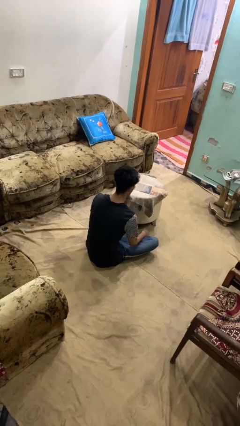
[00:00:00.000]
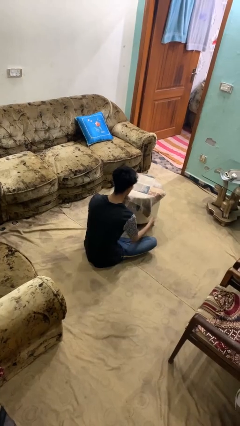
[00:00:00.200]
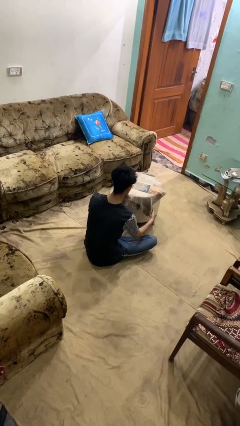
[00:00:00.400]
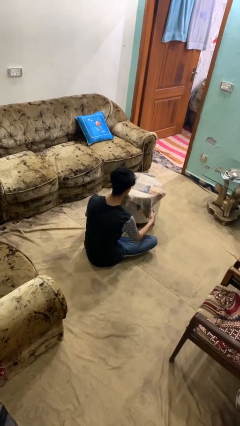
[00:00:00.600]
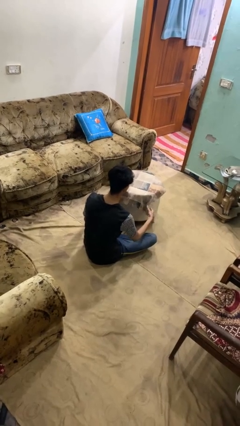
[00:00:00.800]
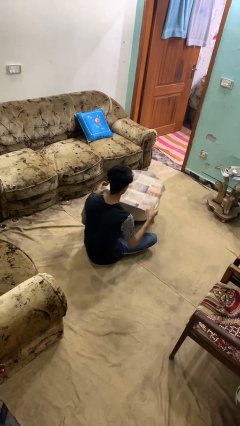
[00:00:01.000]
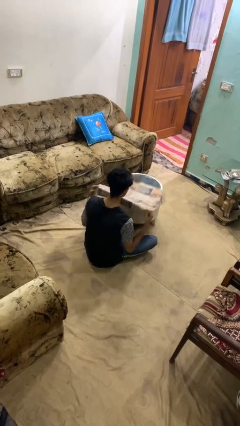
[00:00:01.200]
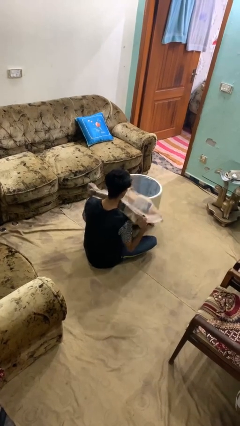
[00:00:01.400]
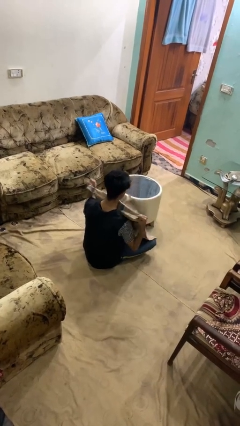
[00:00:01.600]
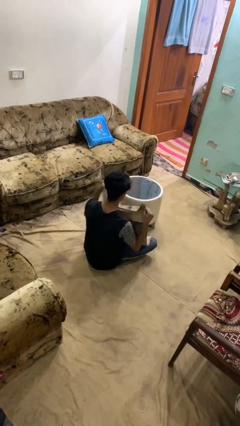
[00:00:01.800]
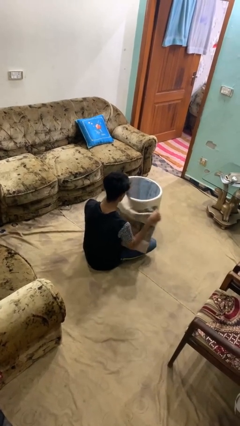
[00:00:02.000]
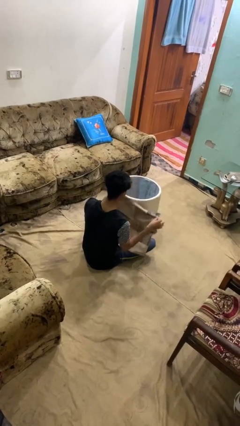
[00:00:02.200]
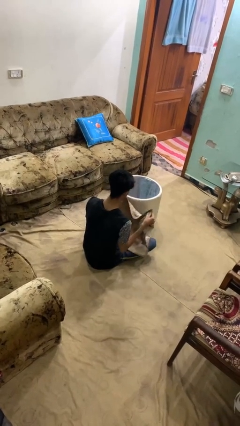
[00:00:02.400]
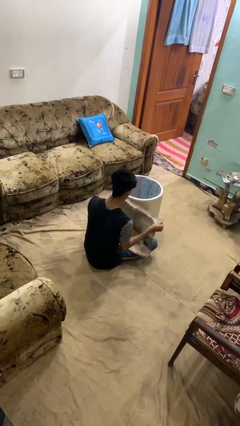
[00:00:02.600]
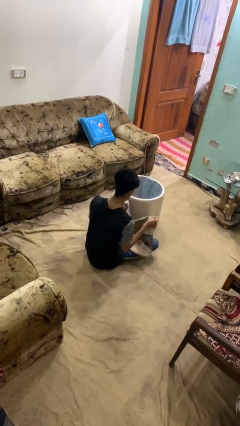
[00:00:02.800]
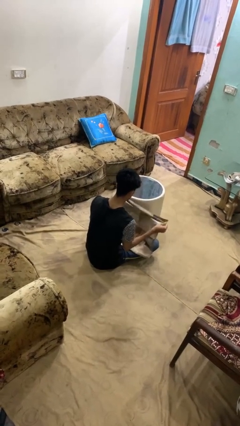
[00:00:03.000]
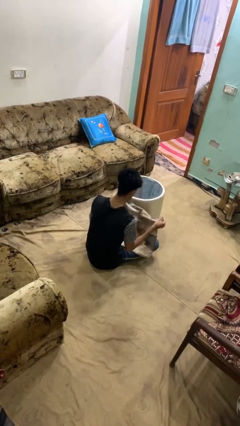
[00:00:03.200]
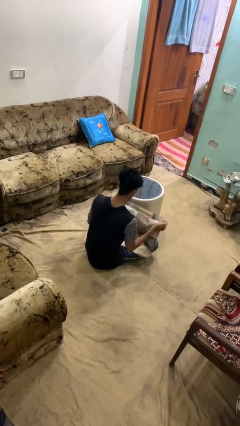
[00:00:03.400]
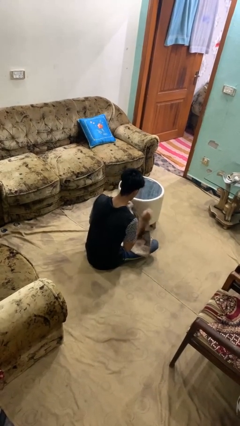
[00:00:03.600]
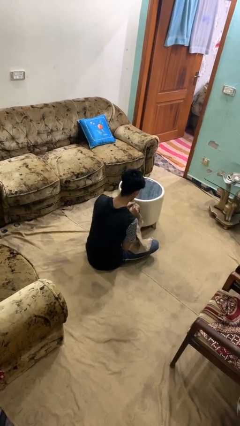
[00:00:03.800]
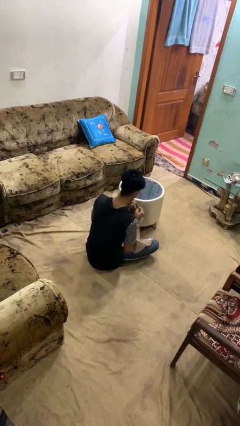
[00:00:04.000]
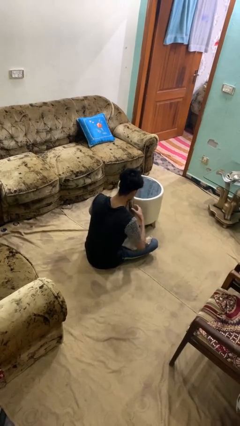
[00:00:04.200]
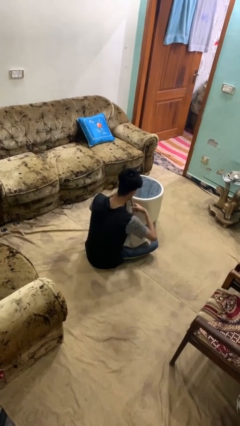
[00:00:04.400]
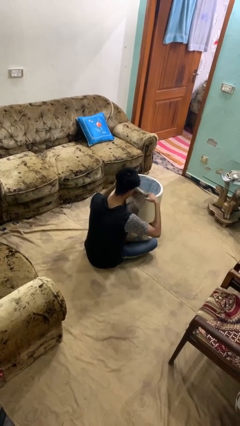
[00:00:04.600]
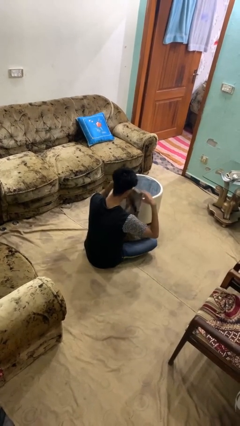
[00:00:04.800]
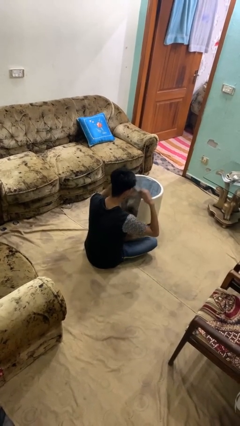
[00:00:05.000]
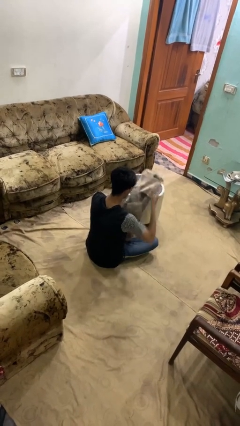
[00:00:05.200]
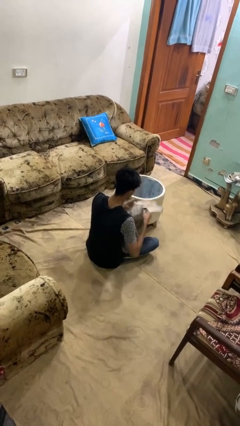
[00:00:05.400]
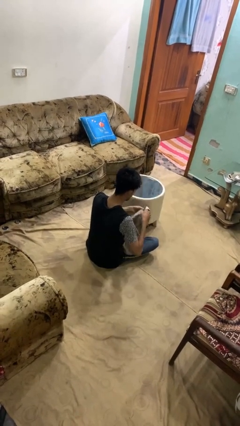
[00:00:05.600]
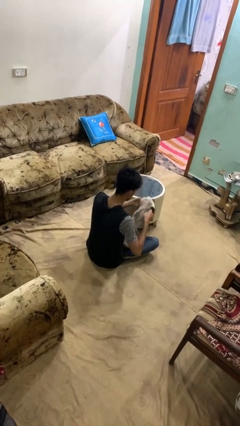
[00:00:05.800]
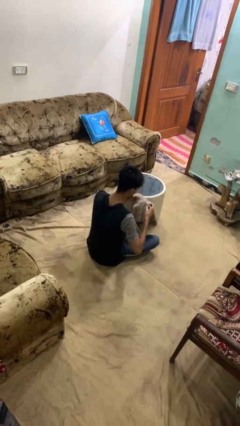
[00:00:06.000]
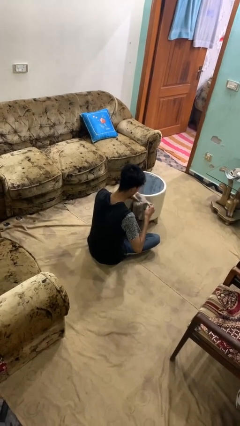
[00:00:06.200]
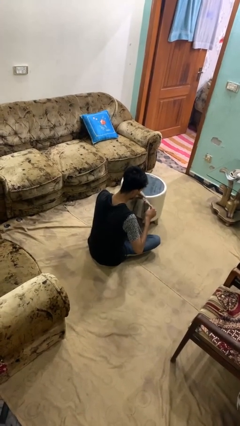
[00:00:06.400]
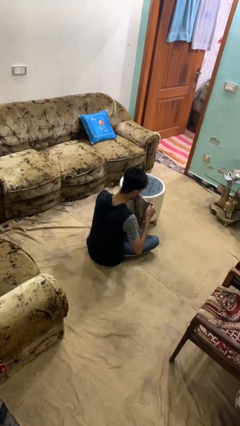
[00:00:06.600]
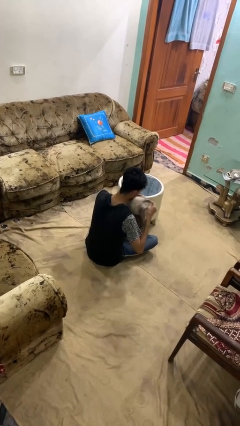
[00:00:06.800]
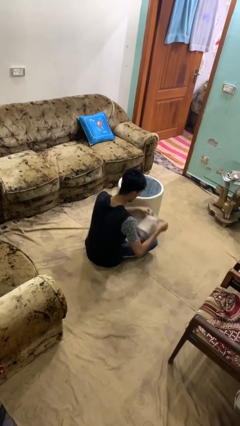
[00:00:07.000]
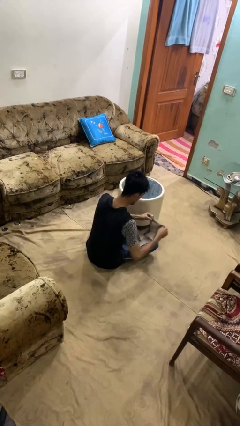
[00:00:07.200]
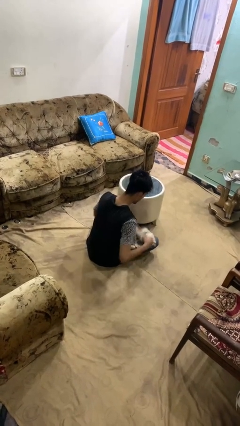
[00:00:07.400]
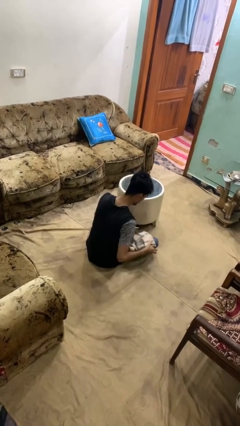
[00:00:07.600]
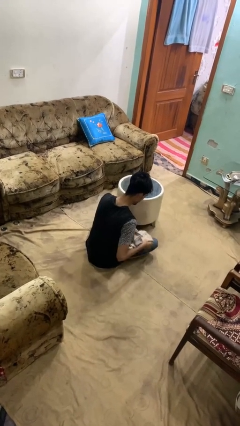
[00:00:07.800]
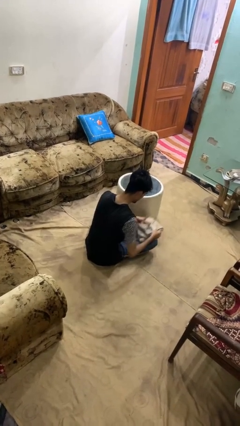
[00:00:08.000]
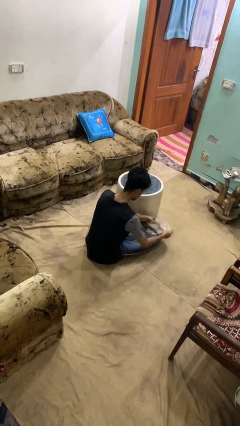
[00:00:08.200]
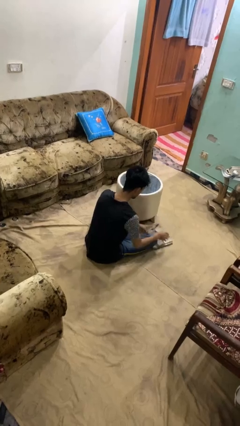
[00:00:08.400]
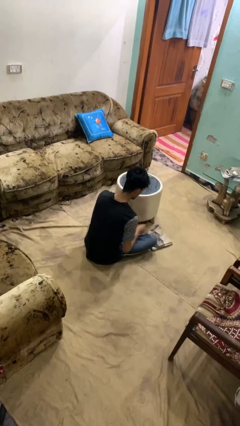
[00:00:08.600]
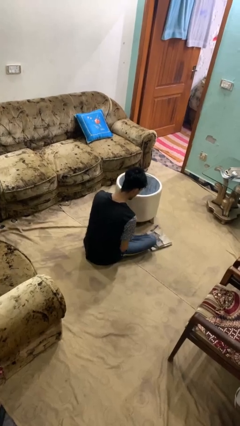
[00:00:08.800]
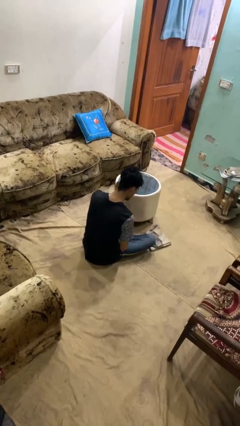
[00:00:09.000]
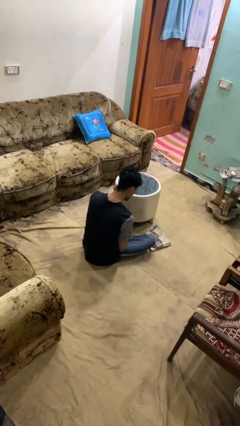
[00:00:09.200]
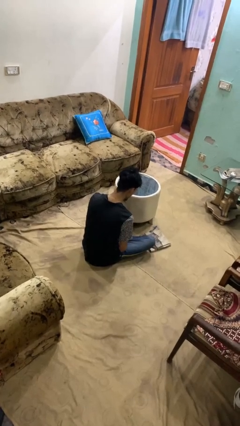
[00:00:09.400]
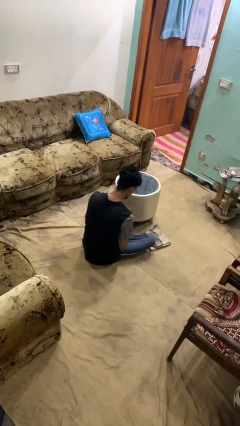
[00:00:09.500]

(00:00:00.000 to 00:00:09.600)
person folds tablecloth

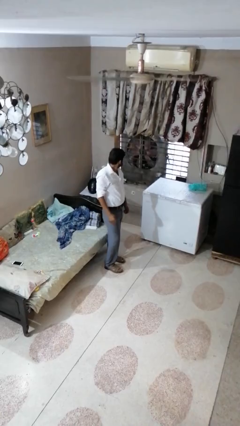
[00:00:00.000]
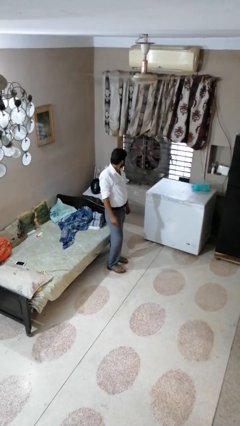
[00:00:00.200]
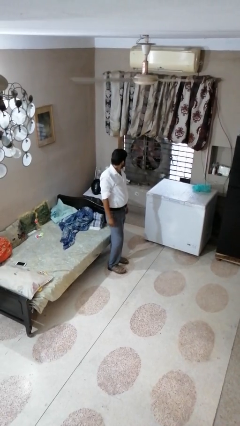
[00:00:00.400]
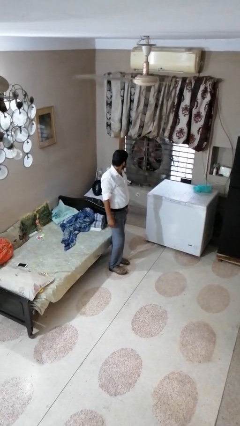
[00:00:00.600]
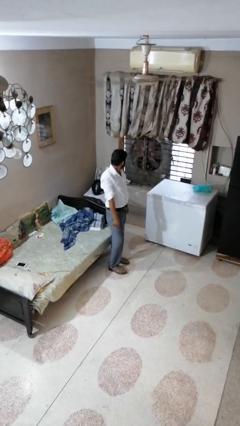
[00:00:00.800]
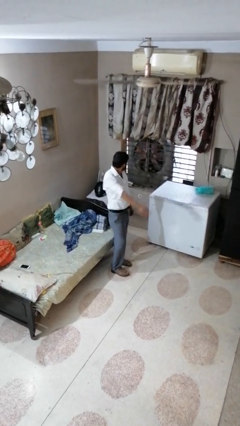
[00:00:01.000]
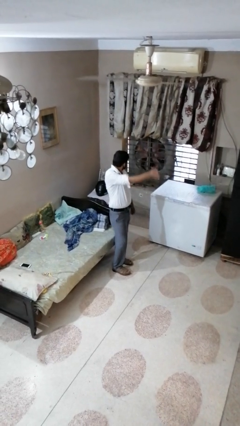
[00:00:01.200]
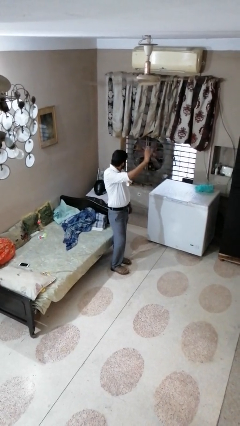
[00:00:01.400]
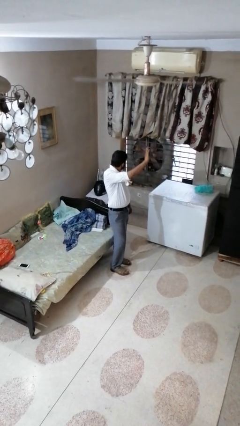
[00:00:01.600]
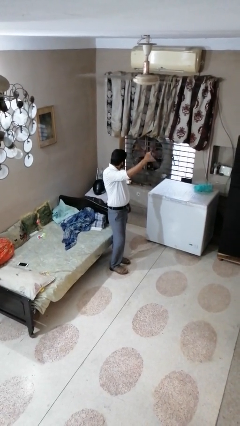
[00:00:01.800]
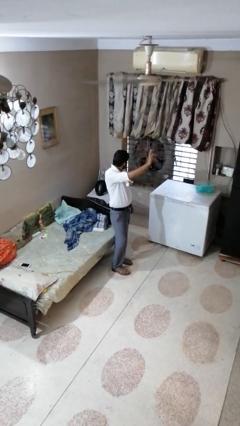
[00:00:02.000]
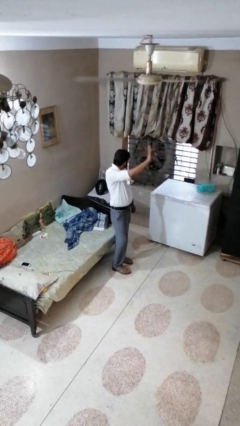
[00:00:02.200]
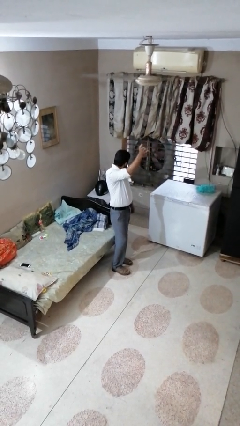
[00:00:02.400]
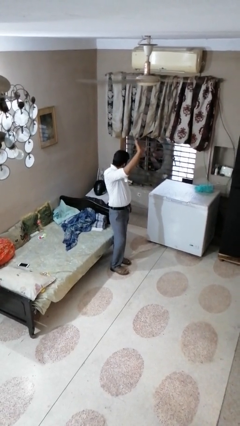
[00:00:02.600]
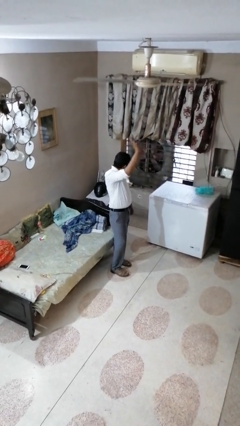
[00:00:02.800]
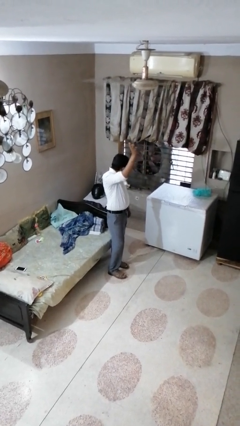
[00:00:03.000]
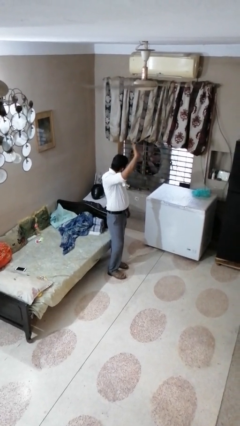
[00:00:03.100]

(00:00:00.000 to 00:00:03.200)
person waves at person

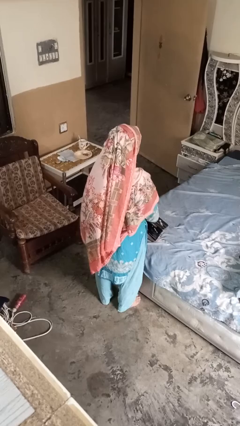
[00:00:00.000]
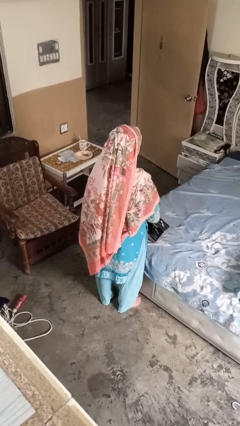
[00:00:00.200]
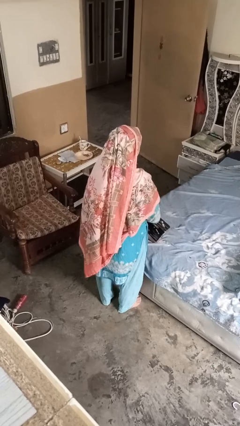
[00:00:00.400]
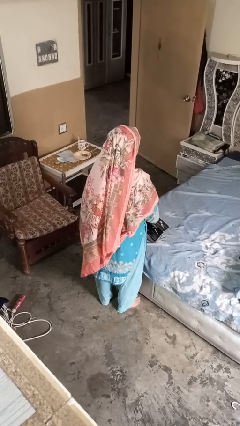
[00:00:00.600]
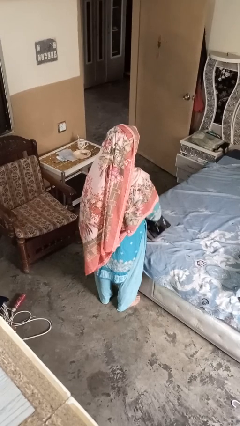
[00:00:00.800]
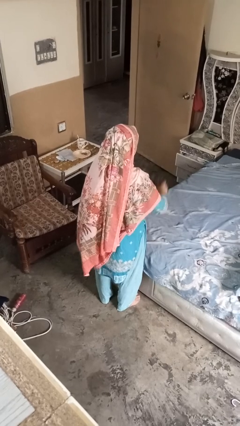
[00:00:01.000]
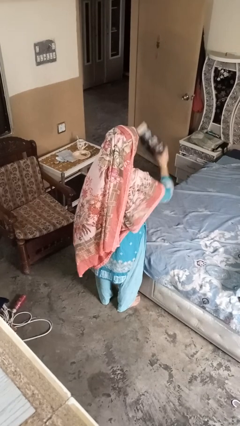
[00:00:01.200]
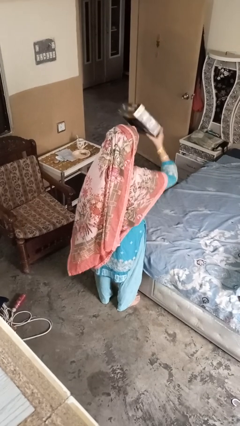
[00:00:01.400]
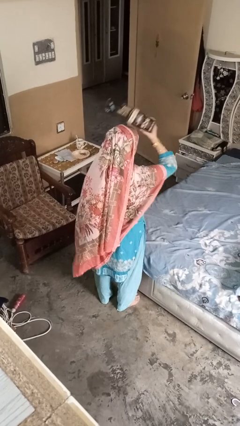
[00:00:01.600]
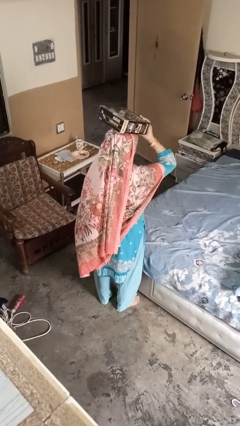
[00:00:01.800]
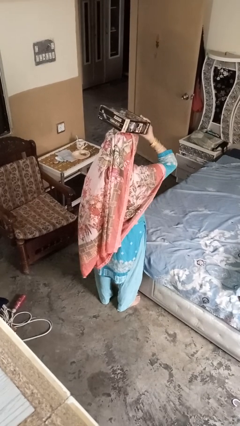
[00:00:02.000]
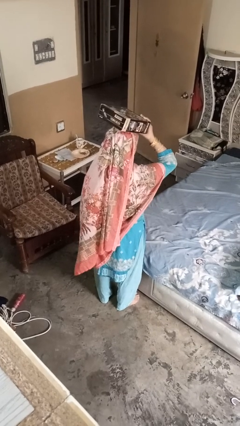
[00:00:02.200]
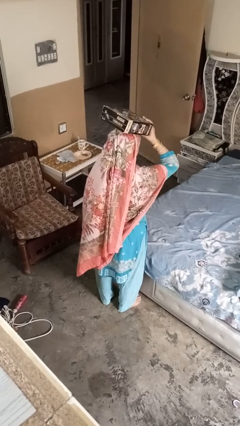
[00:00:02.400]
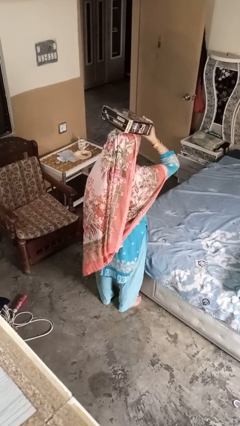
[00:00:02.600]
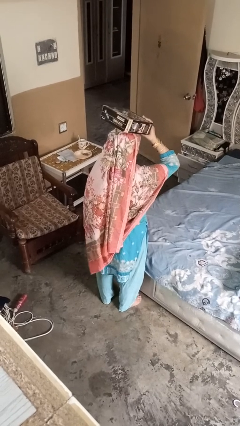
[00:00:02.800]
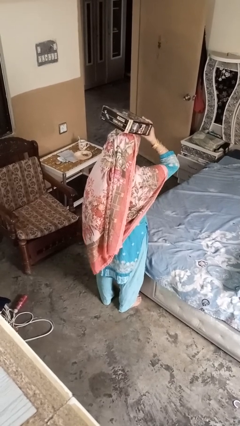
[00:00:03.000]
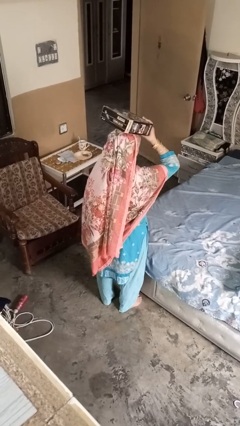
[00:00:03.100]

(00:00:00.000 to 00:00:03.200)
person holds object above head

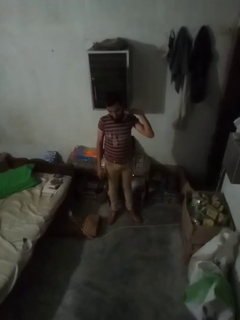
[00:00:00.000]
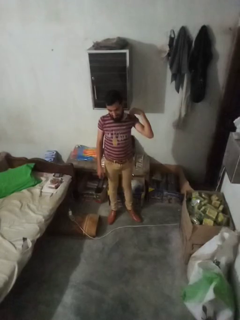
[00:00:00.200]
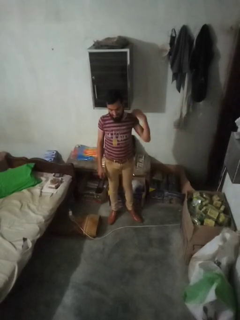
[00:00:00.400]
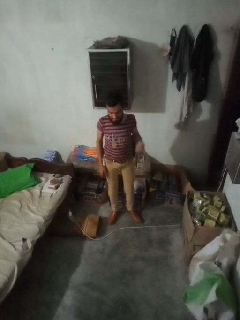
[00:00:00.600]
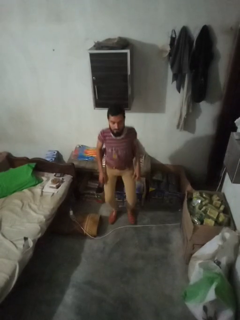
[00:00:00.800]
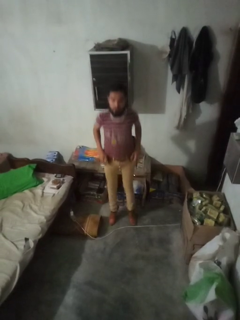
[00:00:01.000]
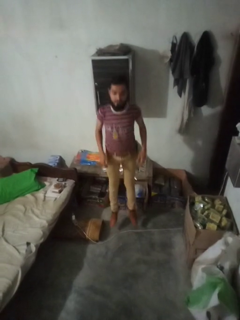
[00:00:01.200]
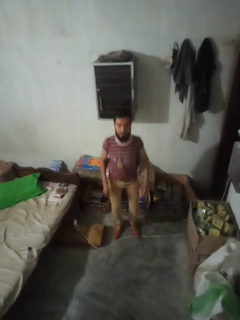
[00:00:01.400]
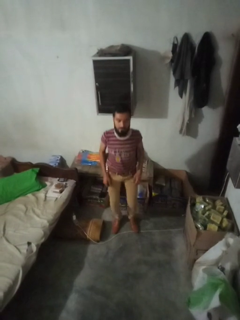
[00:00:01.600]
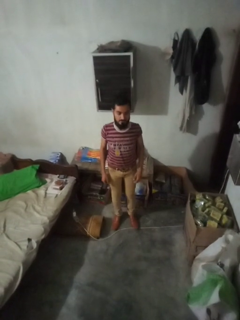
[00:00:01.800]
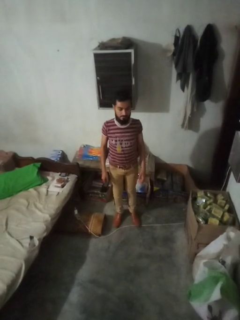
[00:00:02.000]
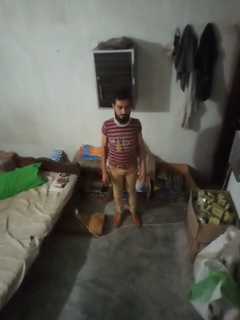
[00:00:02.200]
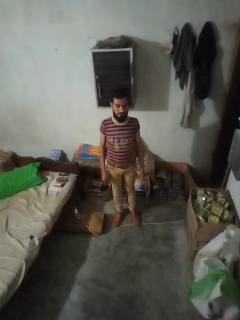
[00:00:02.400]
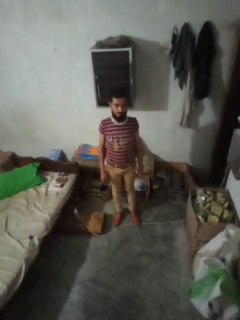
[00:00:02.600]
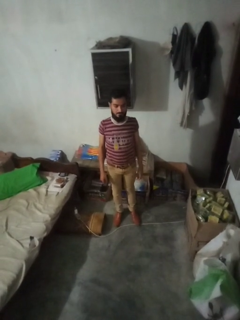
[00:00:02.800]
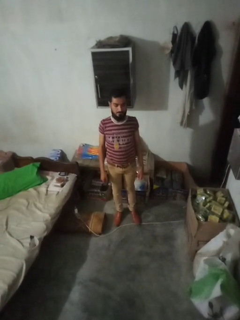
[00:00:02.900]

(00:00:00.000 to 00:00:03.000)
person jumps
